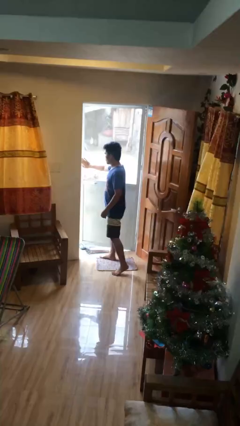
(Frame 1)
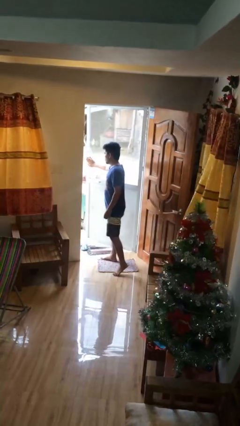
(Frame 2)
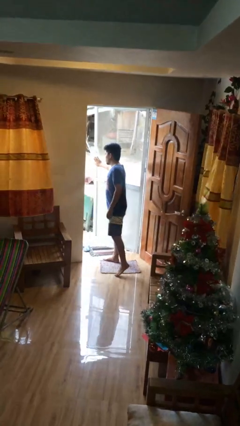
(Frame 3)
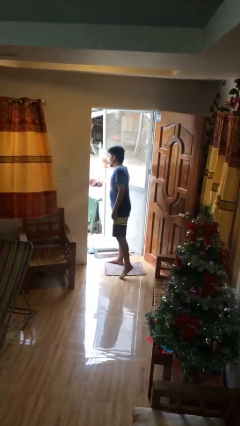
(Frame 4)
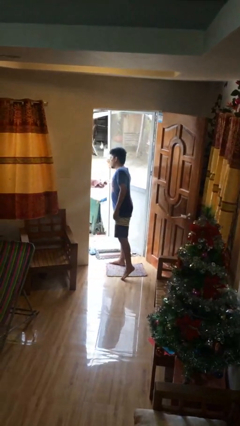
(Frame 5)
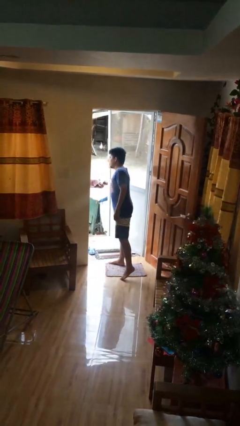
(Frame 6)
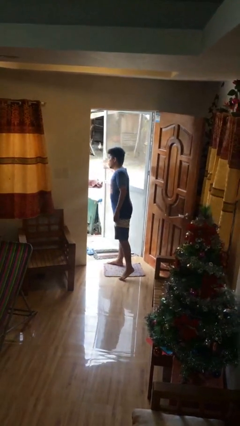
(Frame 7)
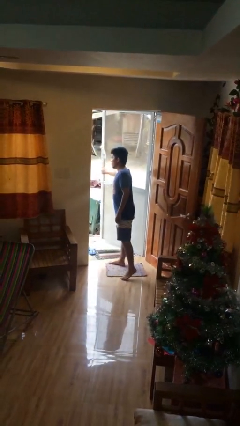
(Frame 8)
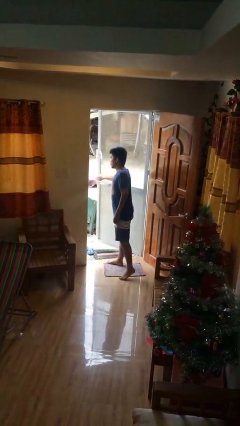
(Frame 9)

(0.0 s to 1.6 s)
person opens facility door

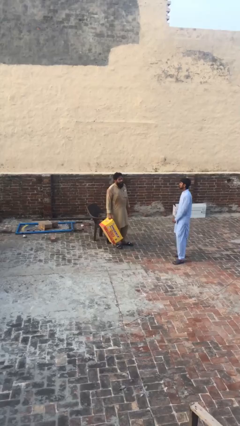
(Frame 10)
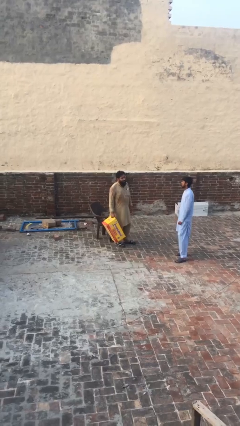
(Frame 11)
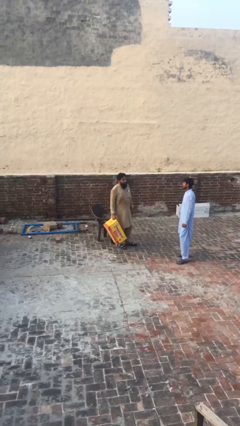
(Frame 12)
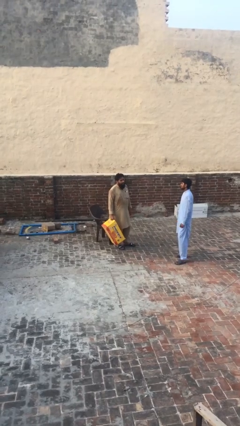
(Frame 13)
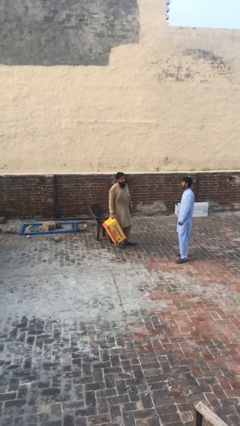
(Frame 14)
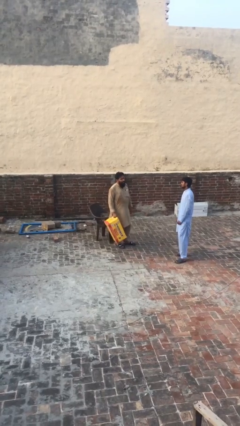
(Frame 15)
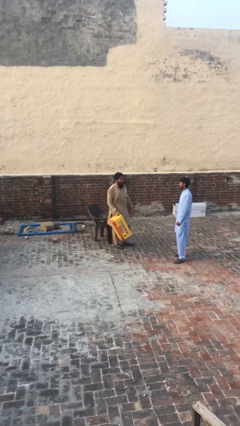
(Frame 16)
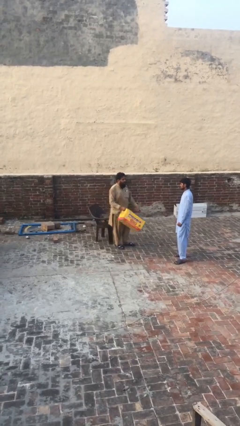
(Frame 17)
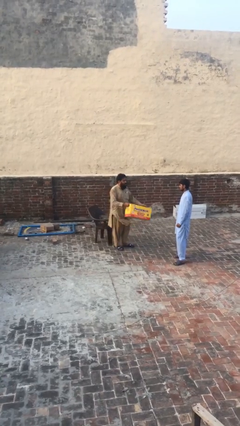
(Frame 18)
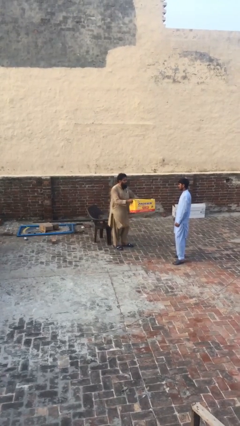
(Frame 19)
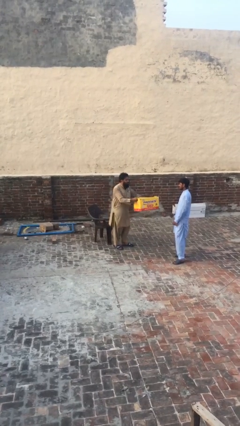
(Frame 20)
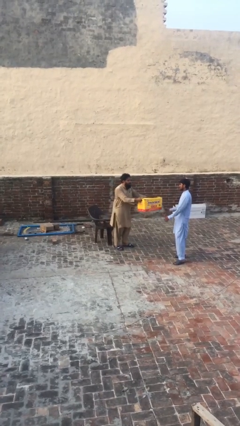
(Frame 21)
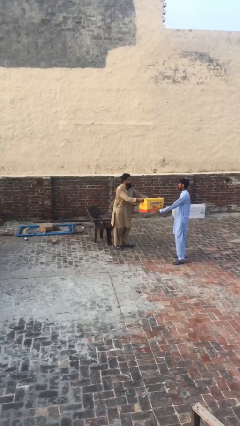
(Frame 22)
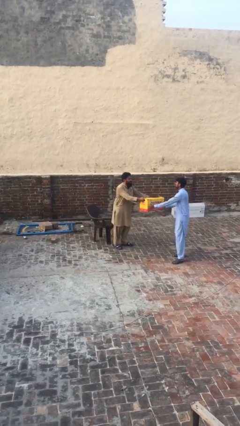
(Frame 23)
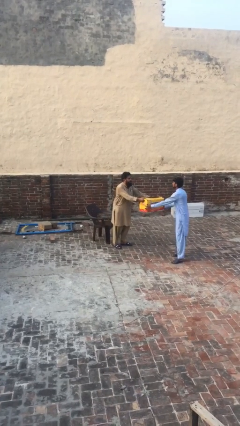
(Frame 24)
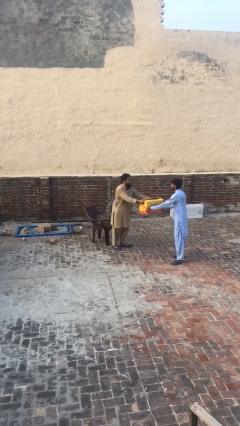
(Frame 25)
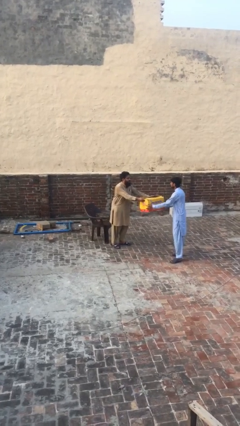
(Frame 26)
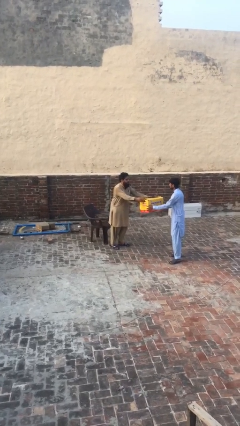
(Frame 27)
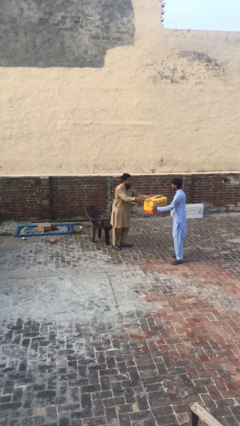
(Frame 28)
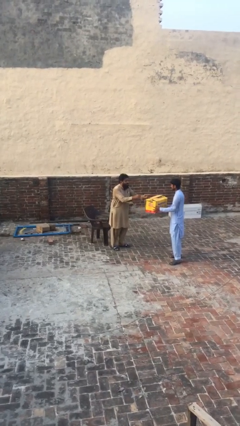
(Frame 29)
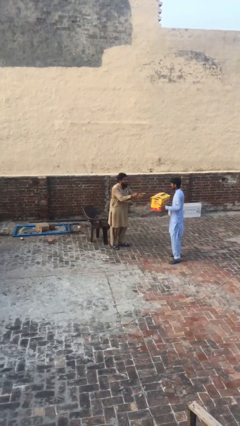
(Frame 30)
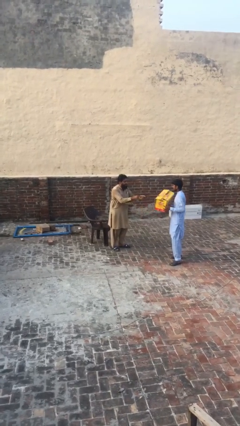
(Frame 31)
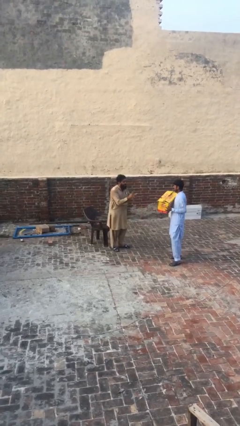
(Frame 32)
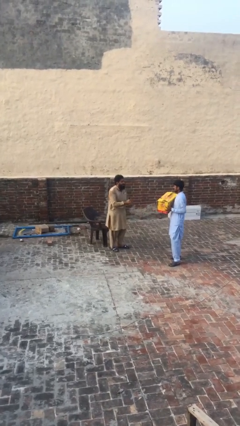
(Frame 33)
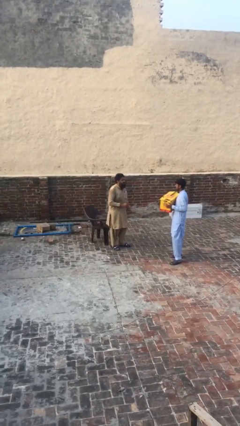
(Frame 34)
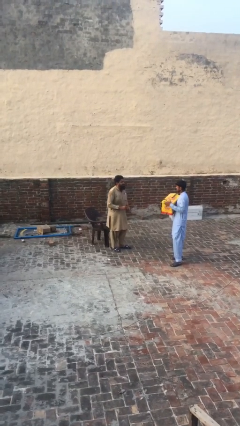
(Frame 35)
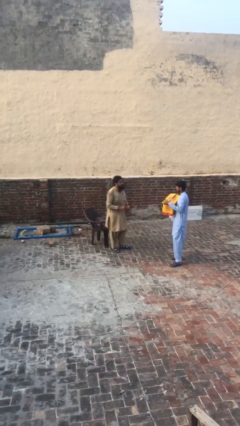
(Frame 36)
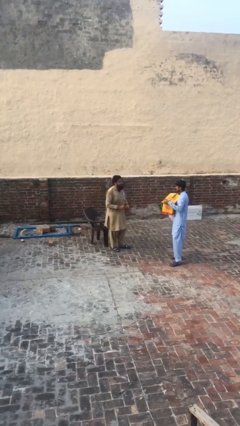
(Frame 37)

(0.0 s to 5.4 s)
person transfers object to person

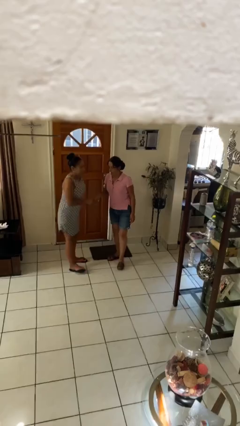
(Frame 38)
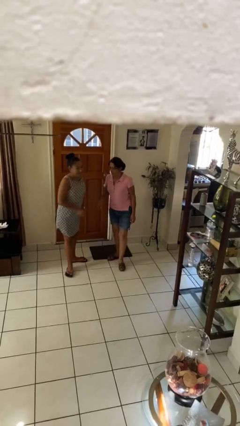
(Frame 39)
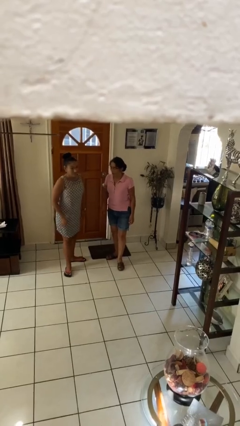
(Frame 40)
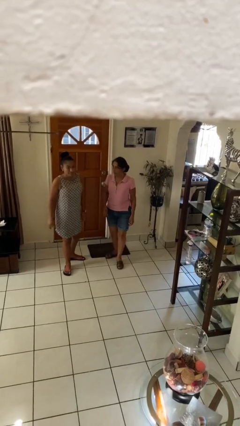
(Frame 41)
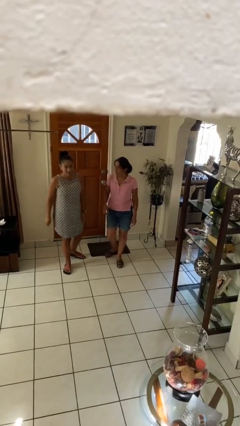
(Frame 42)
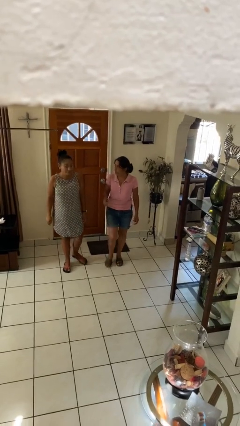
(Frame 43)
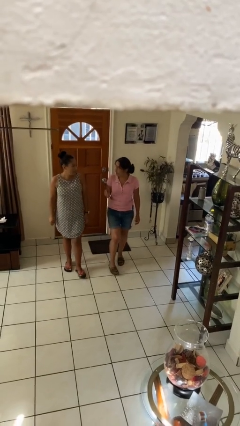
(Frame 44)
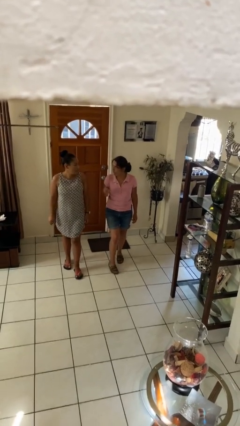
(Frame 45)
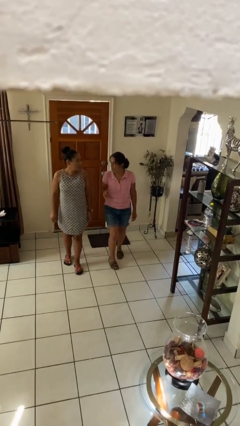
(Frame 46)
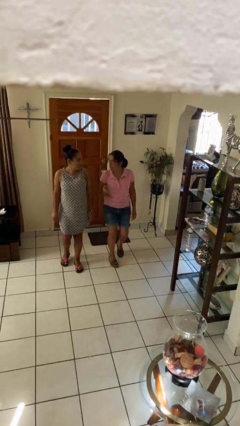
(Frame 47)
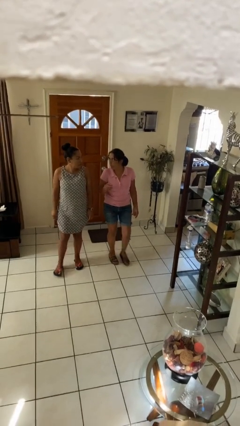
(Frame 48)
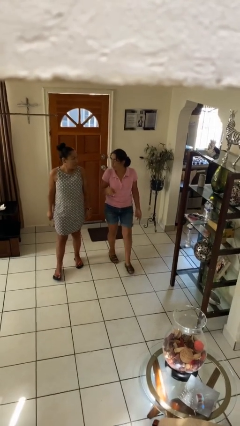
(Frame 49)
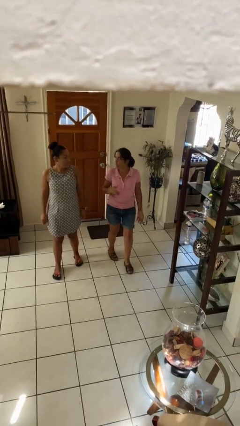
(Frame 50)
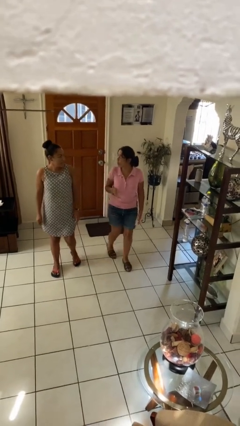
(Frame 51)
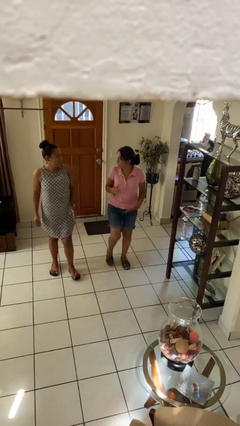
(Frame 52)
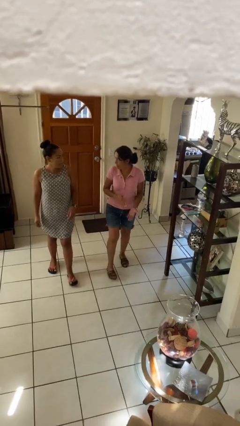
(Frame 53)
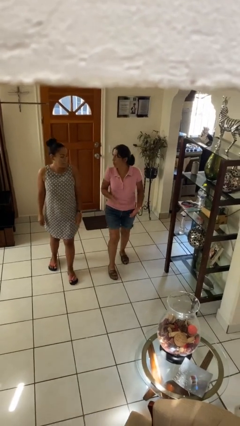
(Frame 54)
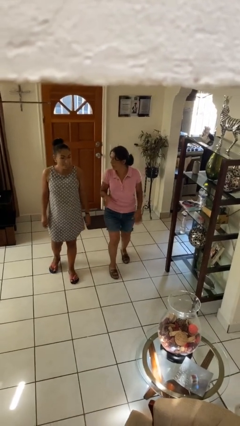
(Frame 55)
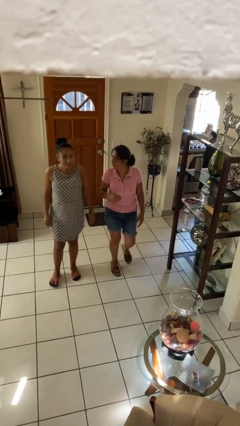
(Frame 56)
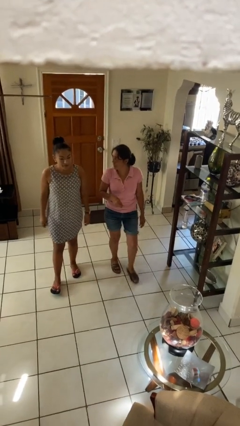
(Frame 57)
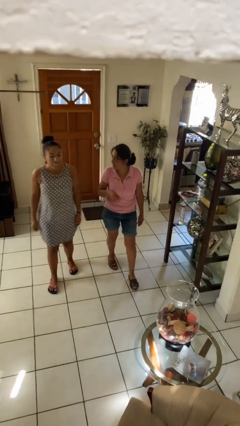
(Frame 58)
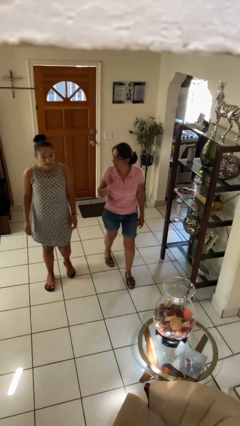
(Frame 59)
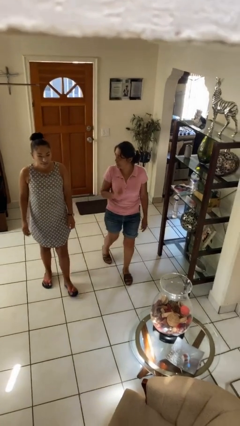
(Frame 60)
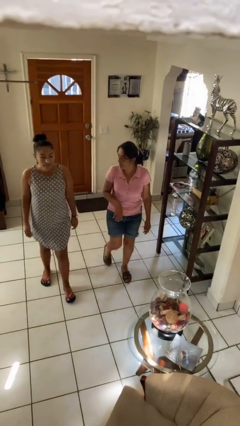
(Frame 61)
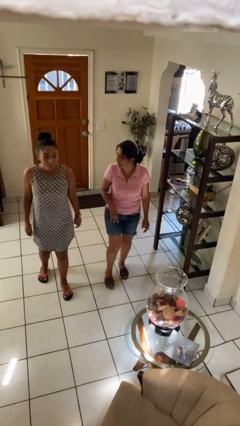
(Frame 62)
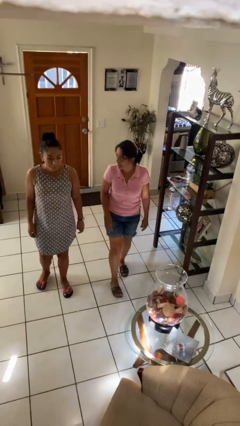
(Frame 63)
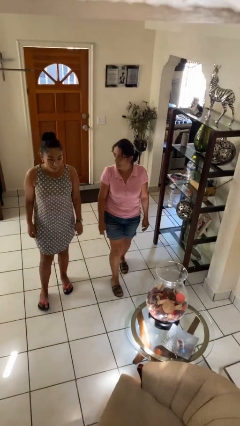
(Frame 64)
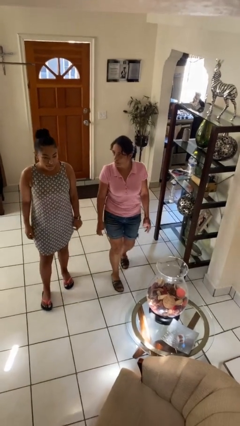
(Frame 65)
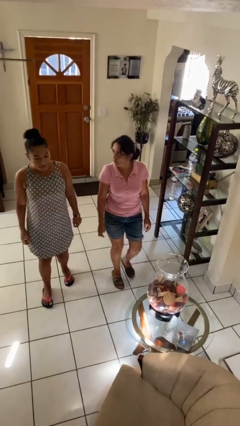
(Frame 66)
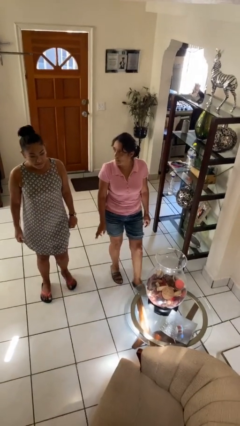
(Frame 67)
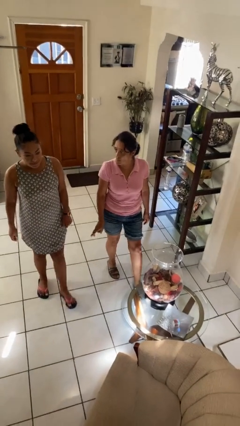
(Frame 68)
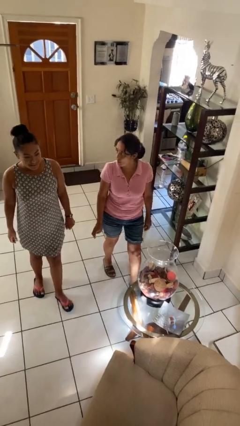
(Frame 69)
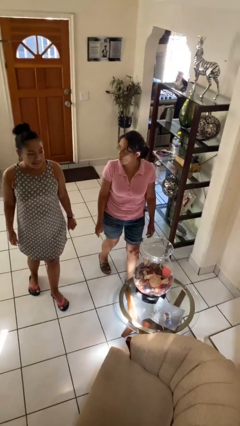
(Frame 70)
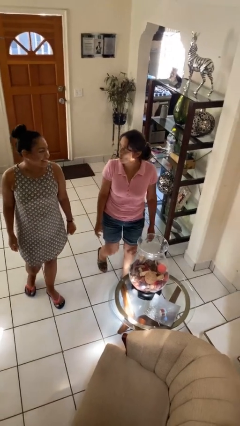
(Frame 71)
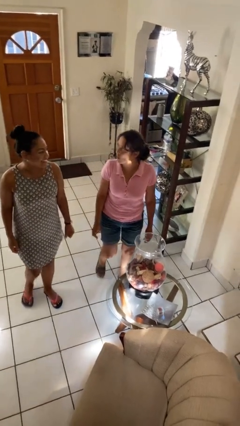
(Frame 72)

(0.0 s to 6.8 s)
person talks to person

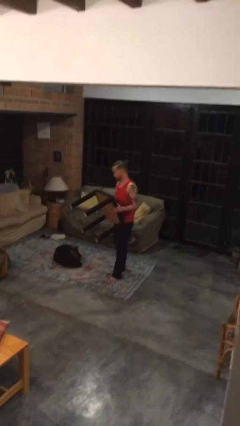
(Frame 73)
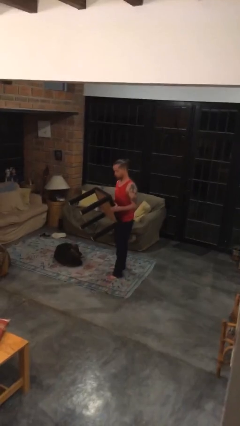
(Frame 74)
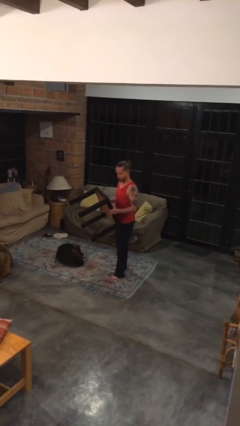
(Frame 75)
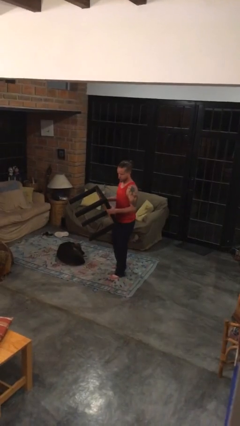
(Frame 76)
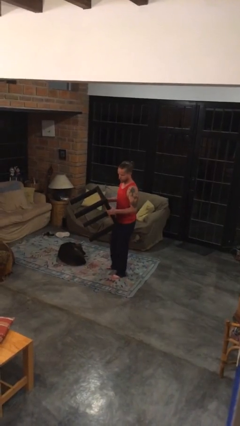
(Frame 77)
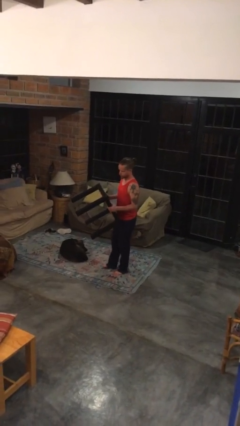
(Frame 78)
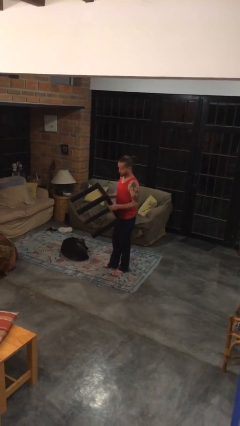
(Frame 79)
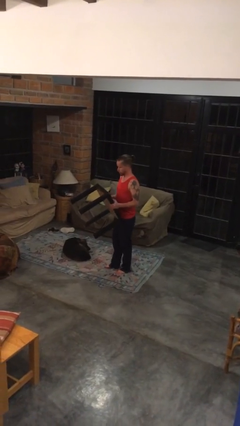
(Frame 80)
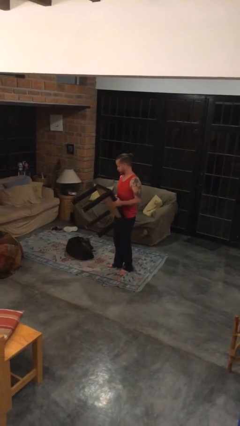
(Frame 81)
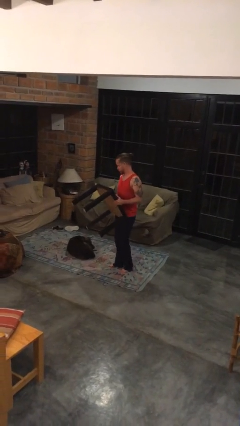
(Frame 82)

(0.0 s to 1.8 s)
person carries furniture

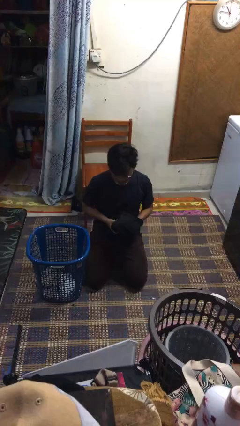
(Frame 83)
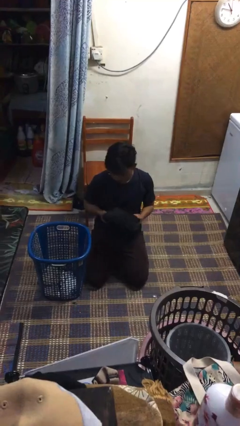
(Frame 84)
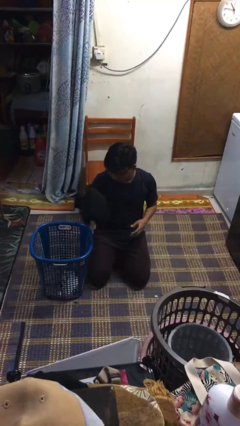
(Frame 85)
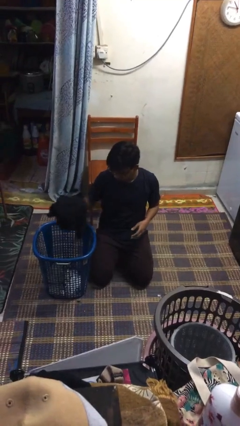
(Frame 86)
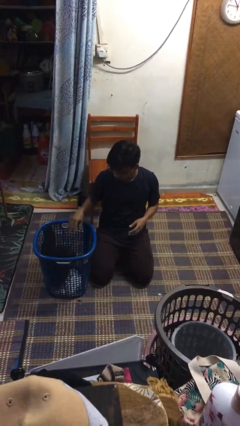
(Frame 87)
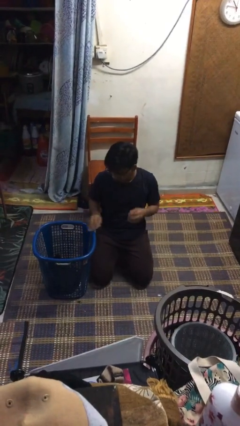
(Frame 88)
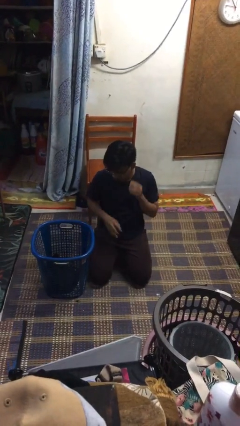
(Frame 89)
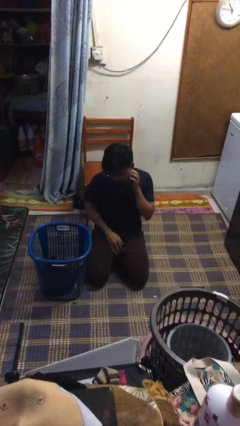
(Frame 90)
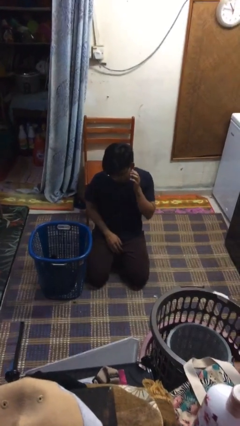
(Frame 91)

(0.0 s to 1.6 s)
person puts object into basket
